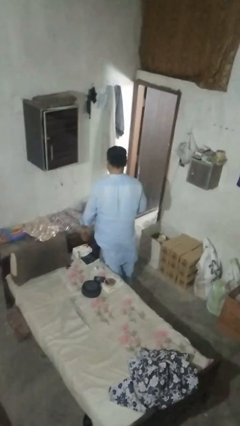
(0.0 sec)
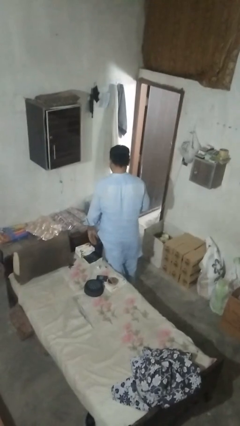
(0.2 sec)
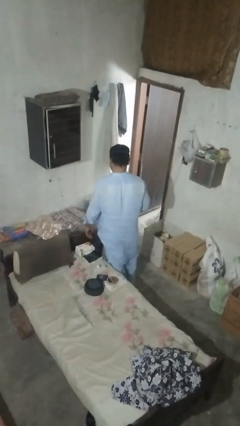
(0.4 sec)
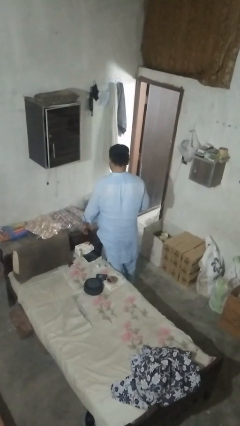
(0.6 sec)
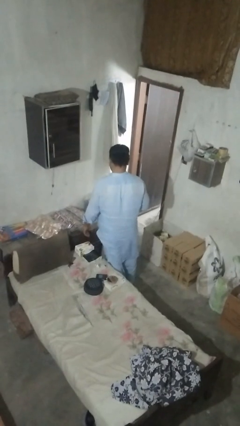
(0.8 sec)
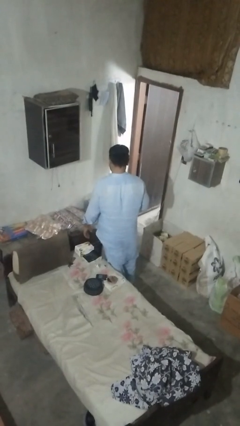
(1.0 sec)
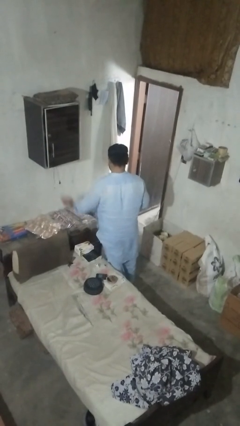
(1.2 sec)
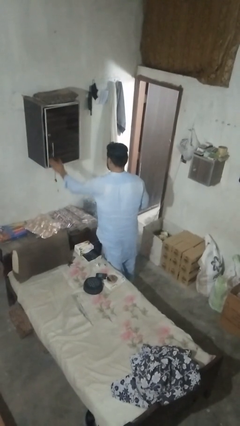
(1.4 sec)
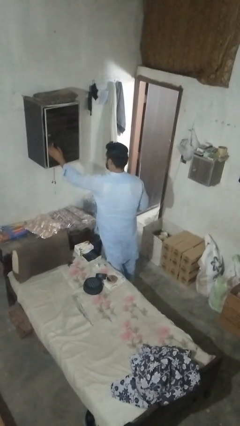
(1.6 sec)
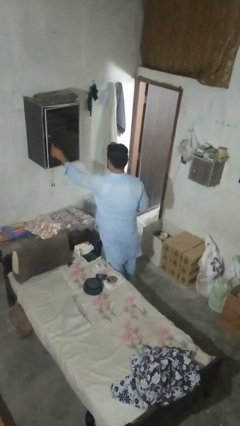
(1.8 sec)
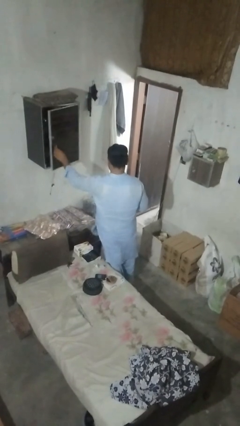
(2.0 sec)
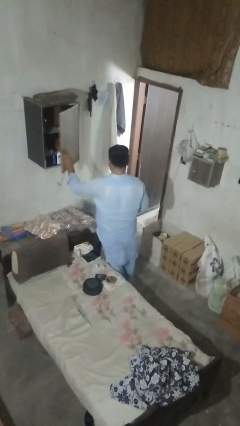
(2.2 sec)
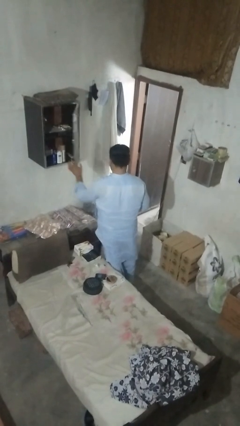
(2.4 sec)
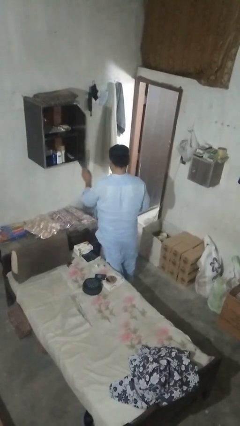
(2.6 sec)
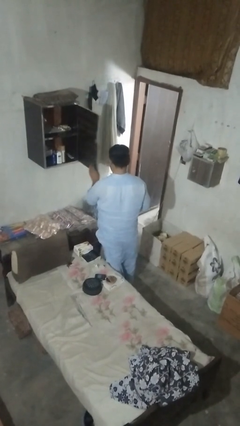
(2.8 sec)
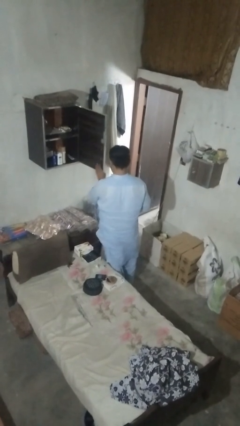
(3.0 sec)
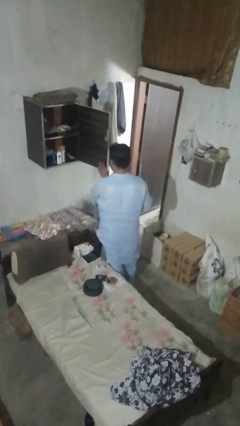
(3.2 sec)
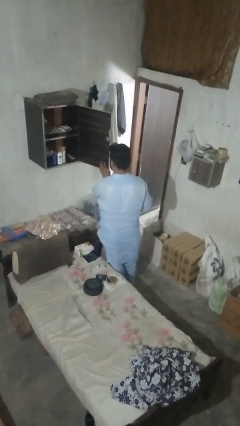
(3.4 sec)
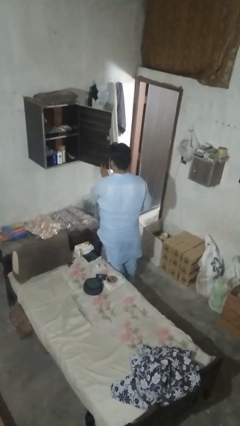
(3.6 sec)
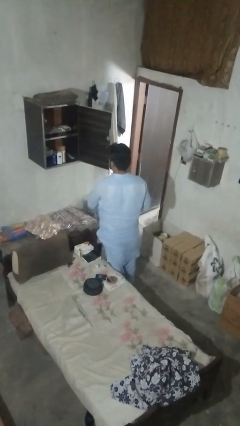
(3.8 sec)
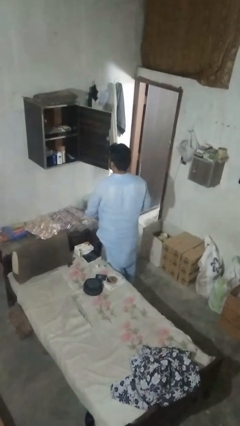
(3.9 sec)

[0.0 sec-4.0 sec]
person opens dresser drawer

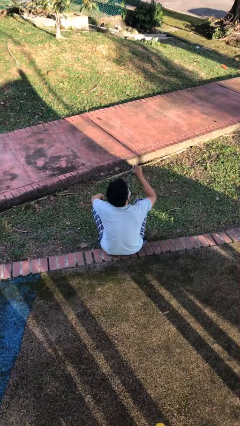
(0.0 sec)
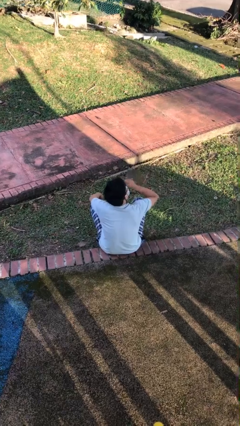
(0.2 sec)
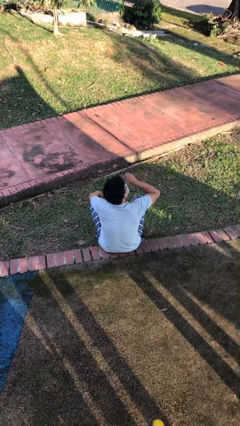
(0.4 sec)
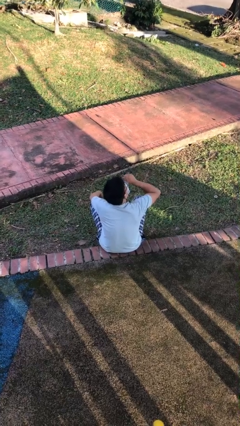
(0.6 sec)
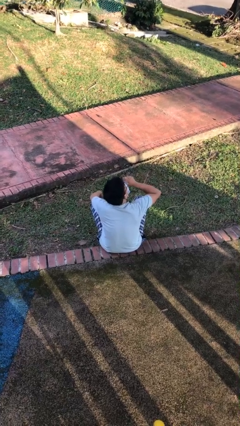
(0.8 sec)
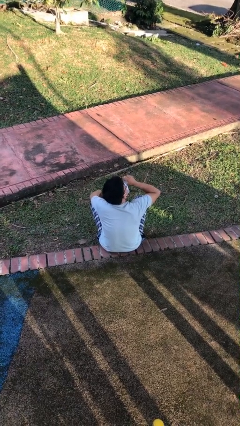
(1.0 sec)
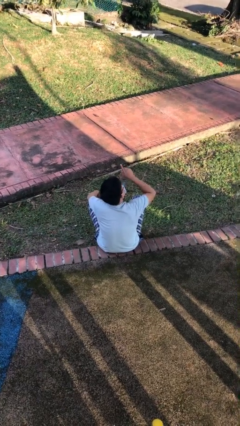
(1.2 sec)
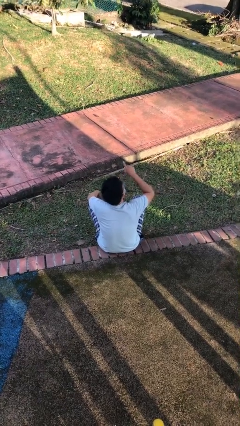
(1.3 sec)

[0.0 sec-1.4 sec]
person gestures be quiet

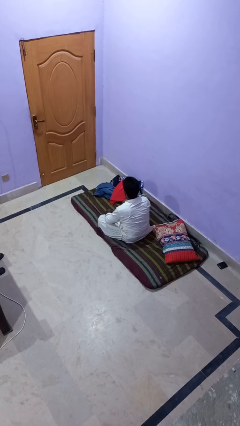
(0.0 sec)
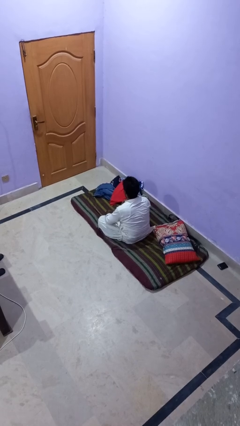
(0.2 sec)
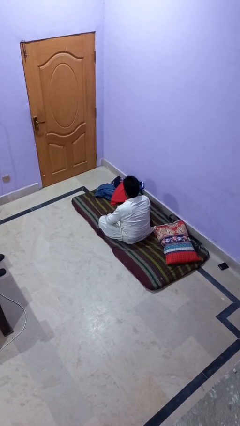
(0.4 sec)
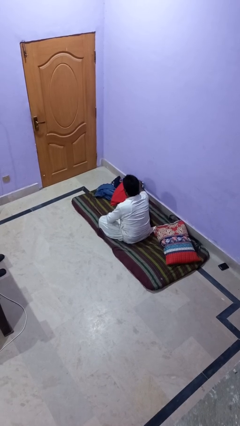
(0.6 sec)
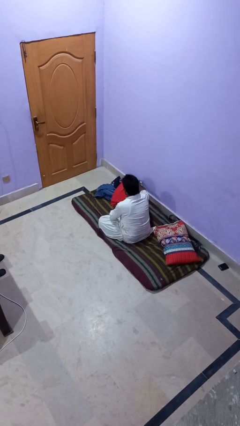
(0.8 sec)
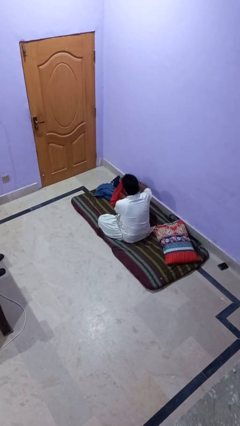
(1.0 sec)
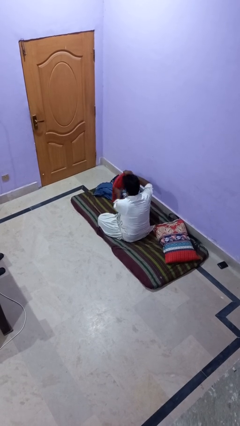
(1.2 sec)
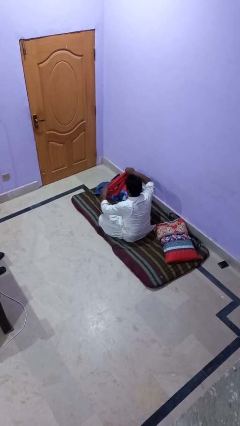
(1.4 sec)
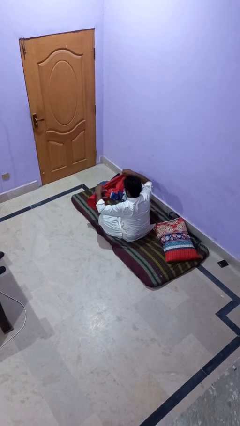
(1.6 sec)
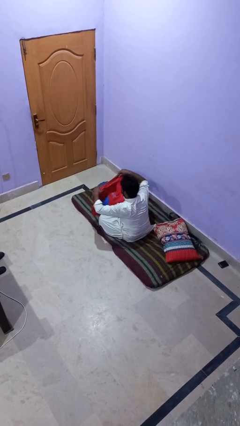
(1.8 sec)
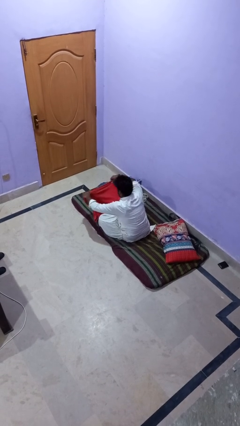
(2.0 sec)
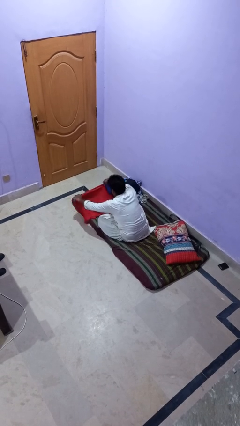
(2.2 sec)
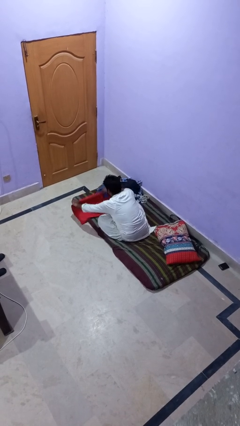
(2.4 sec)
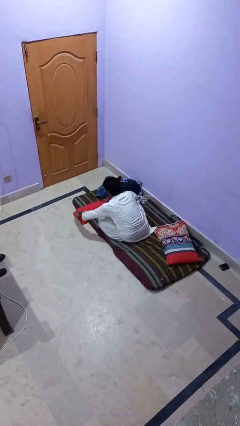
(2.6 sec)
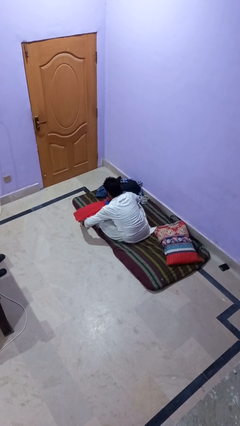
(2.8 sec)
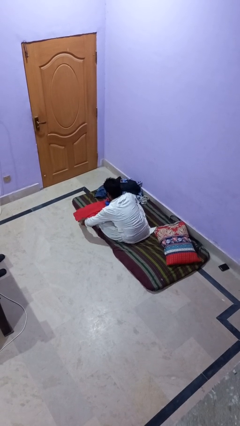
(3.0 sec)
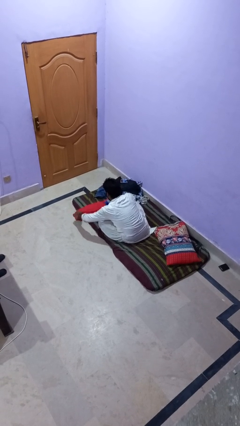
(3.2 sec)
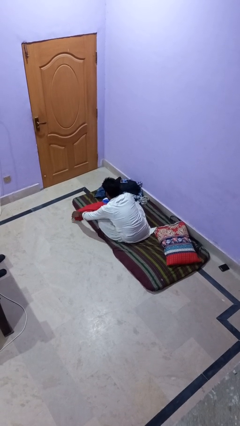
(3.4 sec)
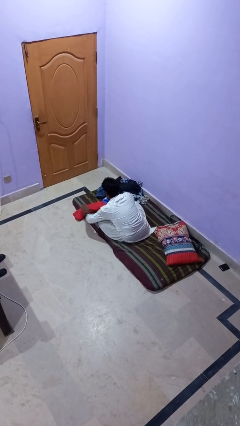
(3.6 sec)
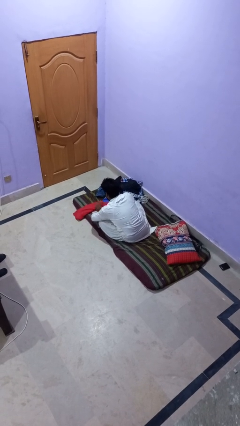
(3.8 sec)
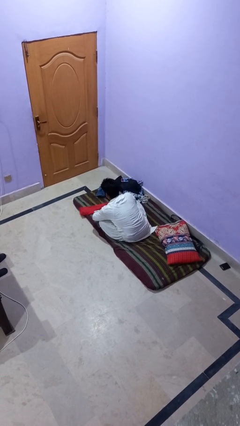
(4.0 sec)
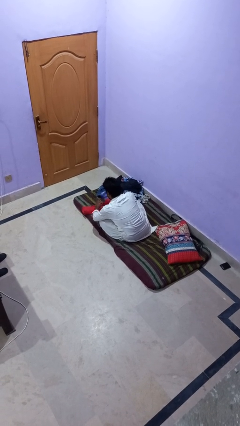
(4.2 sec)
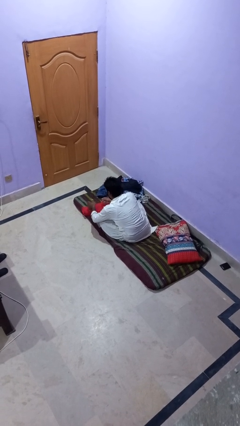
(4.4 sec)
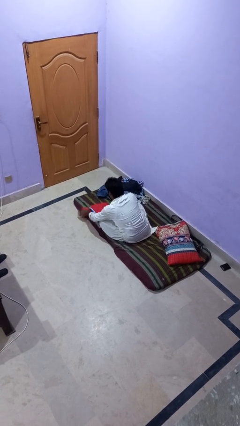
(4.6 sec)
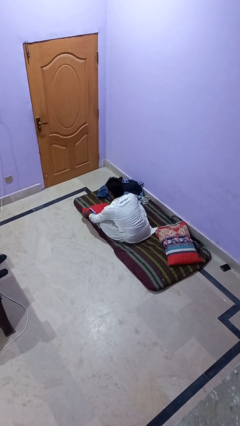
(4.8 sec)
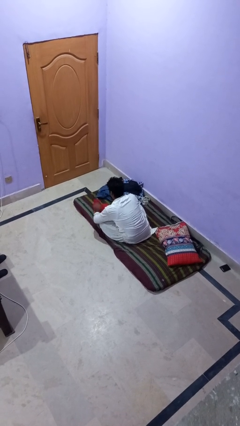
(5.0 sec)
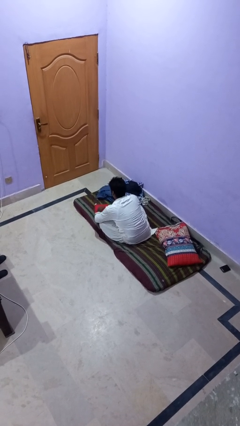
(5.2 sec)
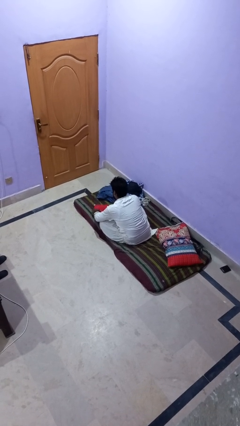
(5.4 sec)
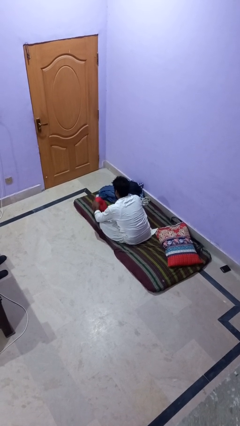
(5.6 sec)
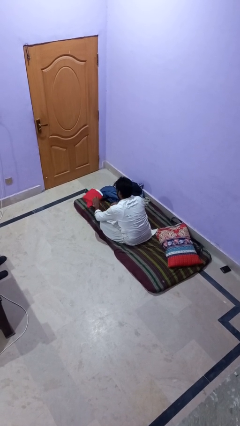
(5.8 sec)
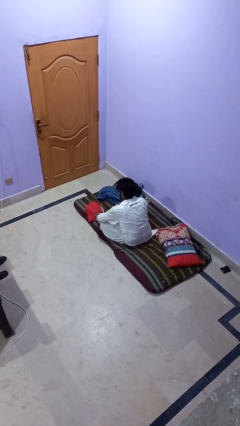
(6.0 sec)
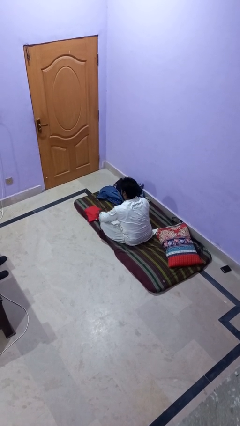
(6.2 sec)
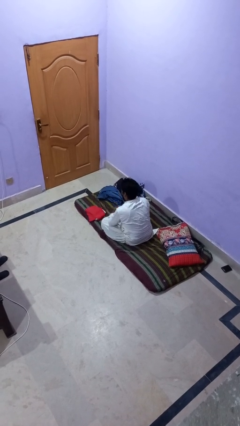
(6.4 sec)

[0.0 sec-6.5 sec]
person folds shirt

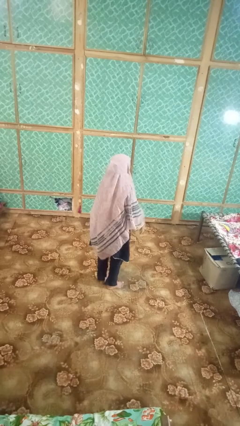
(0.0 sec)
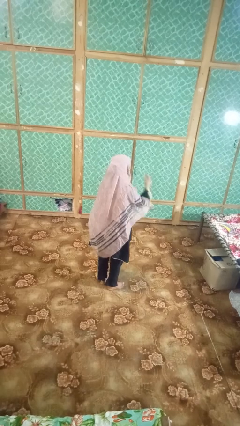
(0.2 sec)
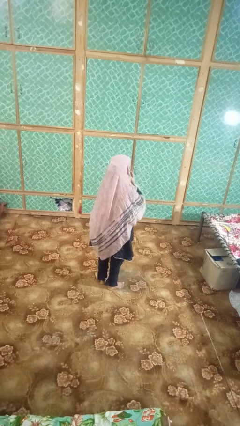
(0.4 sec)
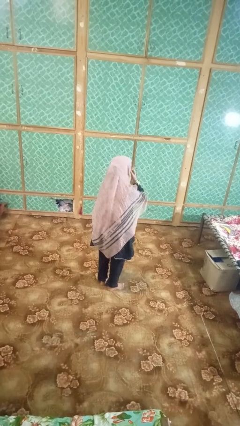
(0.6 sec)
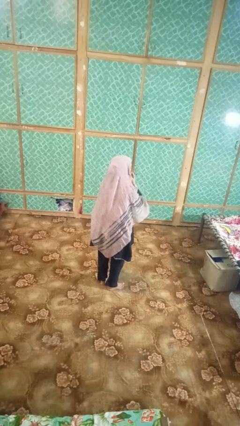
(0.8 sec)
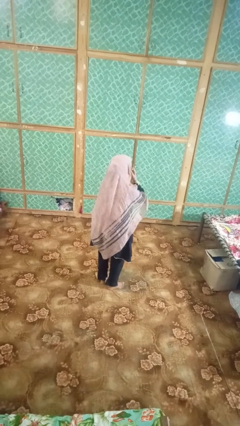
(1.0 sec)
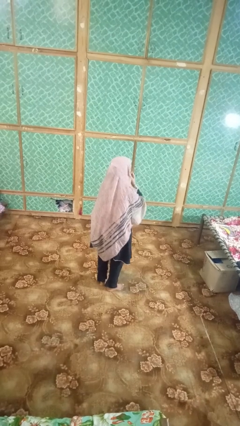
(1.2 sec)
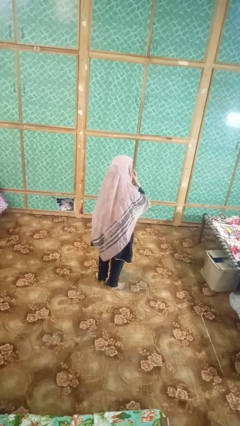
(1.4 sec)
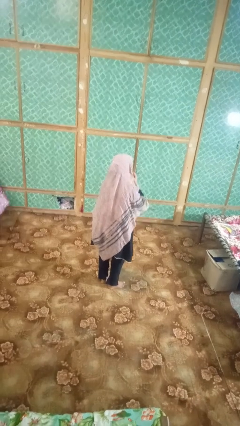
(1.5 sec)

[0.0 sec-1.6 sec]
person strokes chin

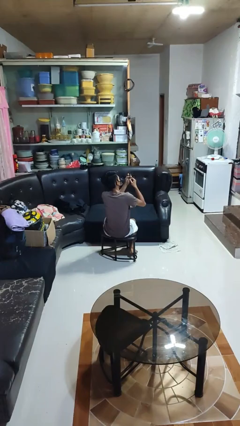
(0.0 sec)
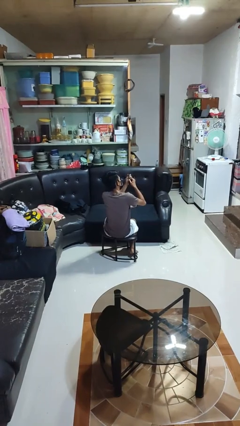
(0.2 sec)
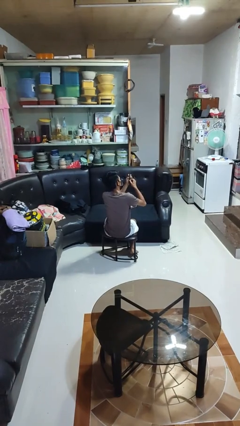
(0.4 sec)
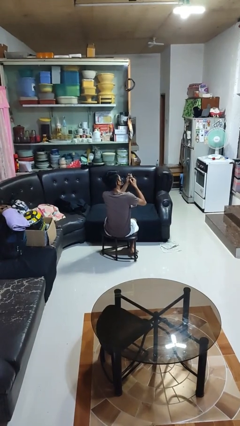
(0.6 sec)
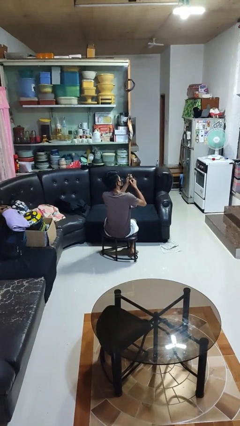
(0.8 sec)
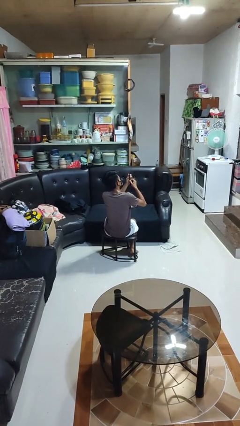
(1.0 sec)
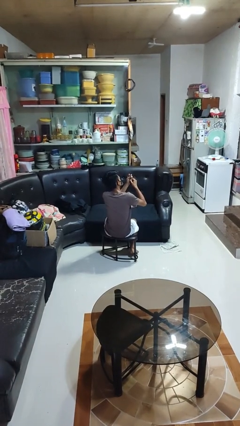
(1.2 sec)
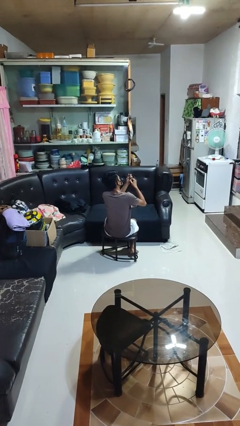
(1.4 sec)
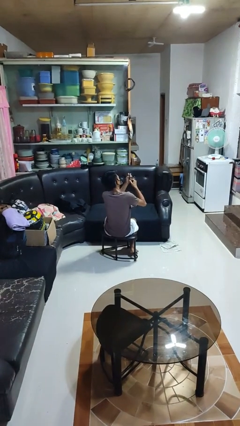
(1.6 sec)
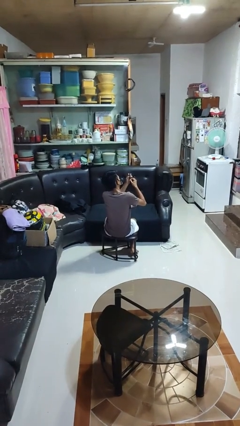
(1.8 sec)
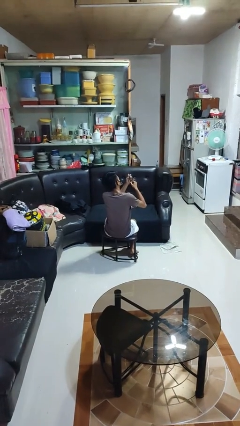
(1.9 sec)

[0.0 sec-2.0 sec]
person files fingernails

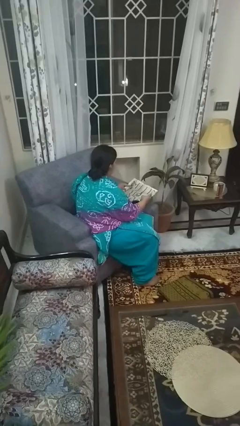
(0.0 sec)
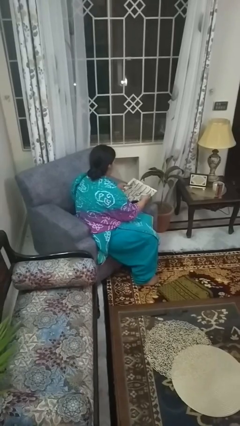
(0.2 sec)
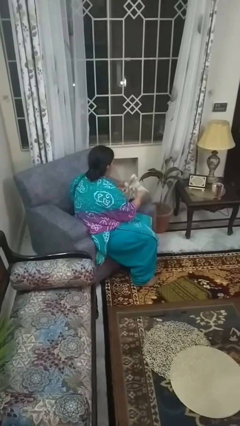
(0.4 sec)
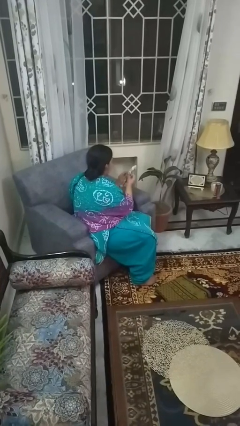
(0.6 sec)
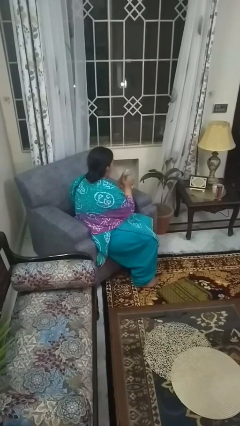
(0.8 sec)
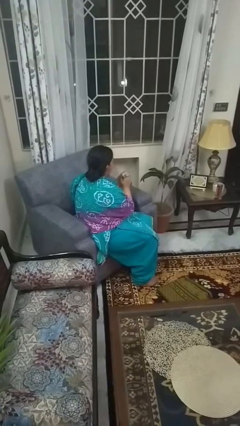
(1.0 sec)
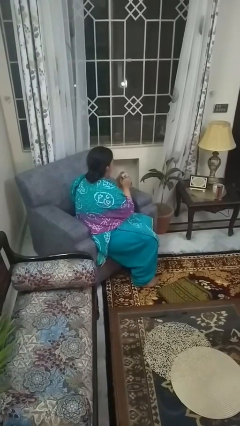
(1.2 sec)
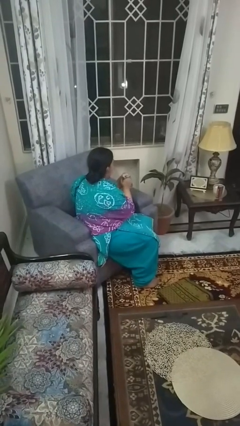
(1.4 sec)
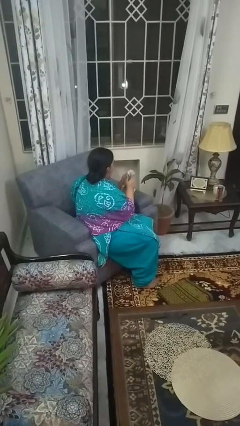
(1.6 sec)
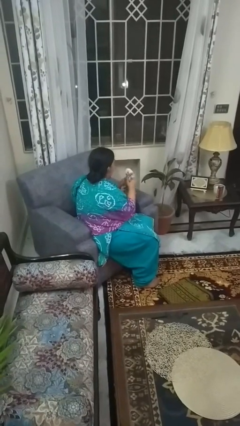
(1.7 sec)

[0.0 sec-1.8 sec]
person crumples paper

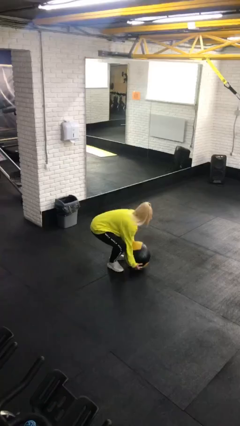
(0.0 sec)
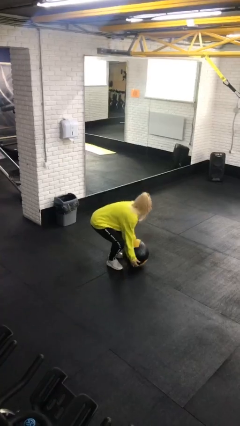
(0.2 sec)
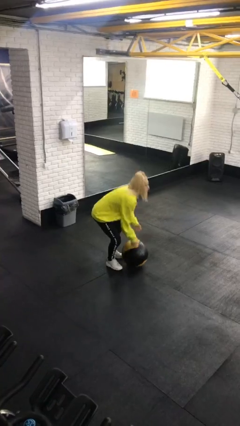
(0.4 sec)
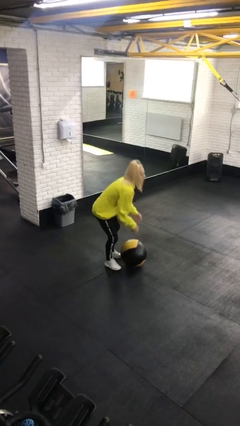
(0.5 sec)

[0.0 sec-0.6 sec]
person puts down object on floor
